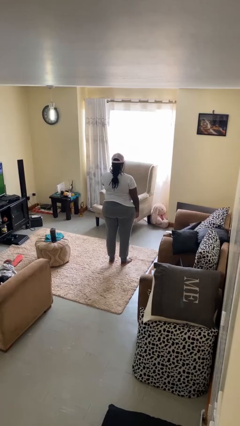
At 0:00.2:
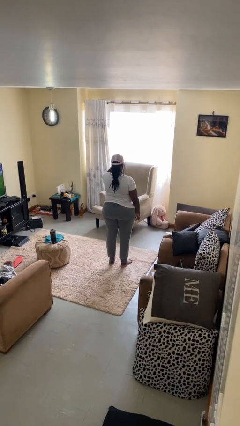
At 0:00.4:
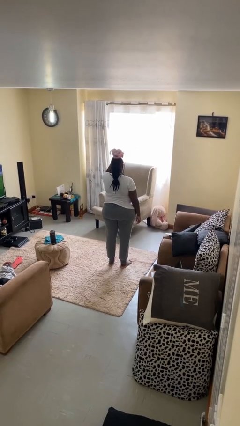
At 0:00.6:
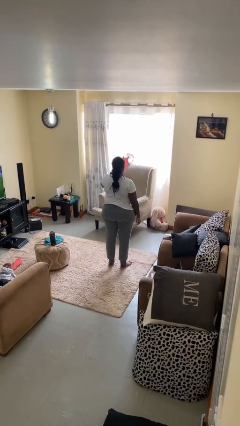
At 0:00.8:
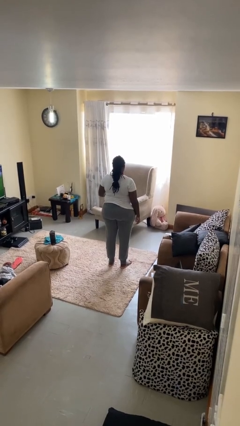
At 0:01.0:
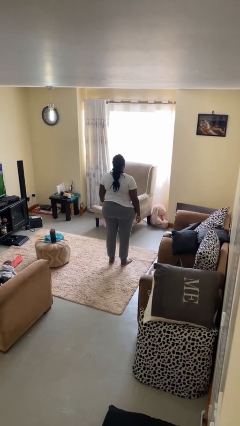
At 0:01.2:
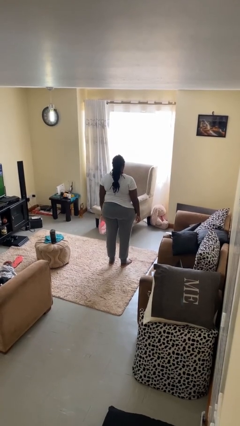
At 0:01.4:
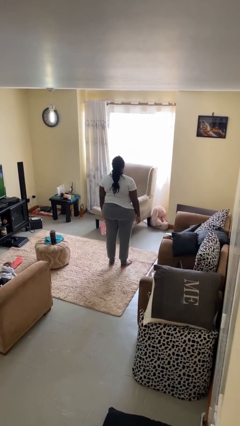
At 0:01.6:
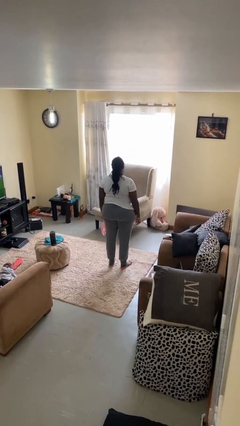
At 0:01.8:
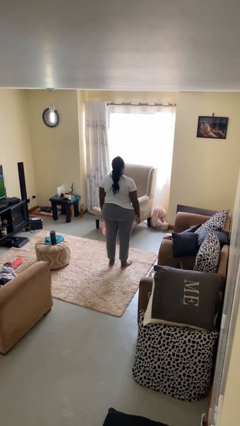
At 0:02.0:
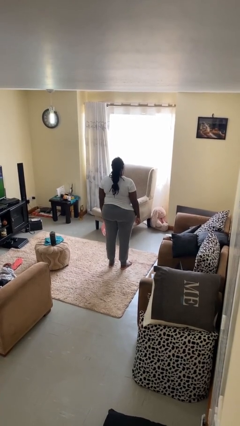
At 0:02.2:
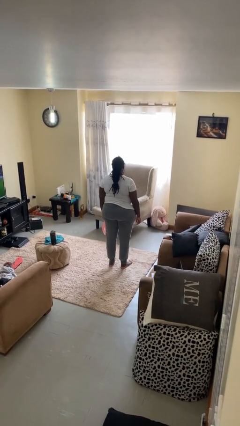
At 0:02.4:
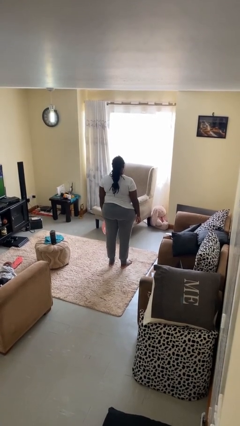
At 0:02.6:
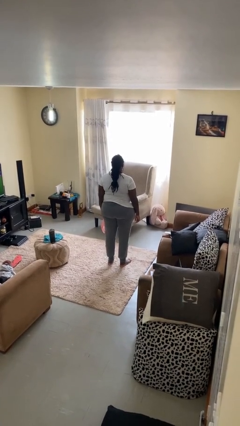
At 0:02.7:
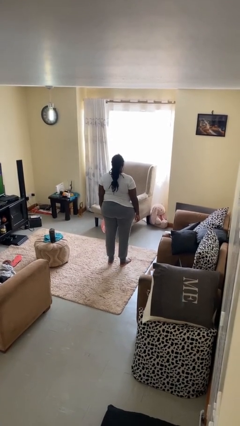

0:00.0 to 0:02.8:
person takes off hat

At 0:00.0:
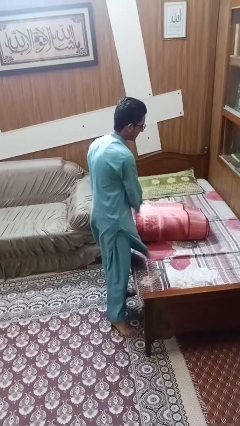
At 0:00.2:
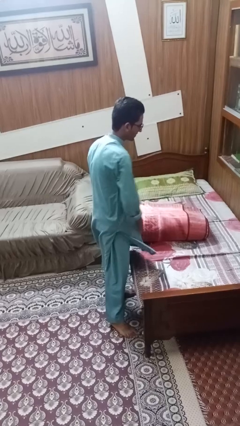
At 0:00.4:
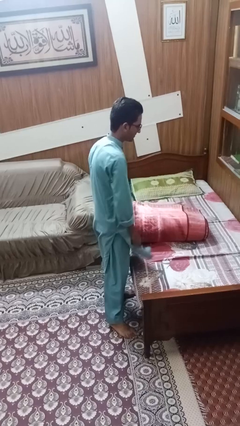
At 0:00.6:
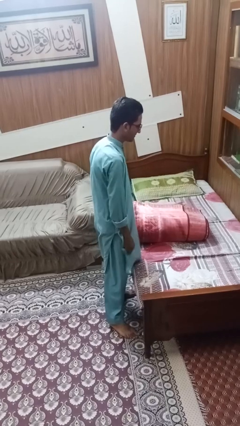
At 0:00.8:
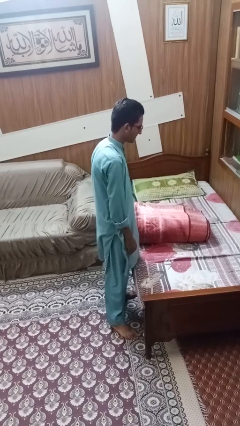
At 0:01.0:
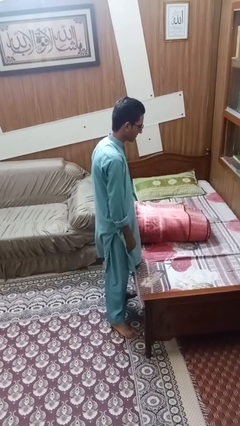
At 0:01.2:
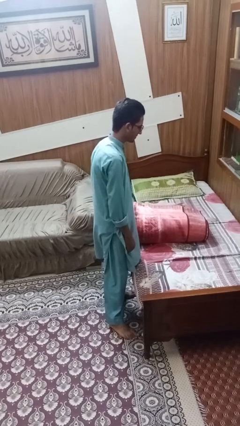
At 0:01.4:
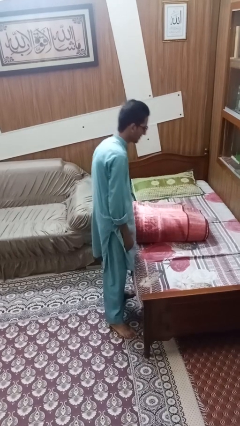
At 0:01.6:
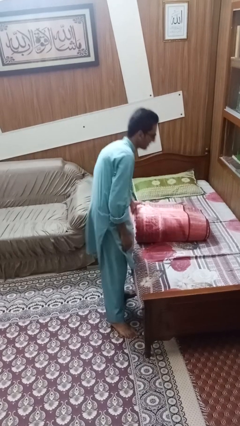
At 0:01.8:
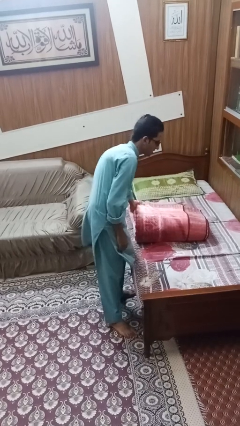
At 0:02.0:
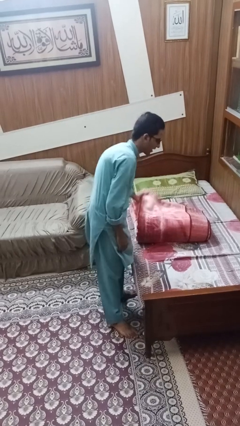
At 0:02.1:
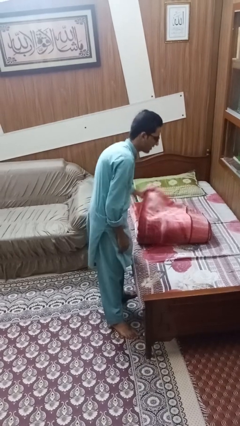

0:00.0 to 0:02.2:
person folds blanket

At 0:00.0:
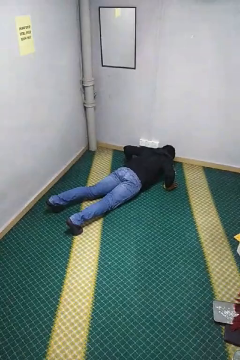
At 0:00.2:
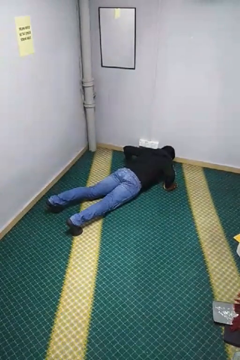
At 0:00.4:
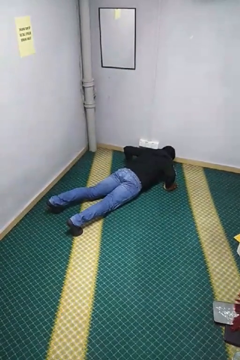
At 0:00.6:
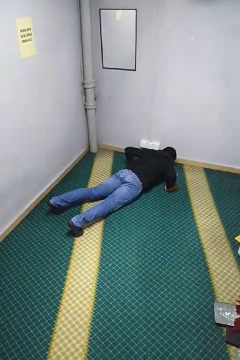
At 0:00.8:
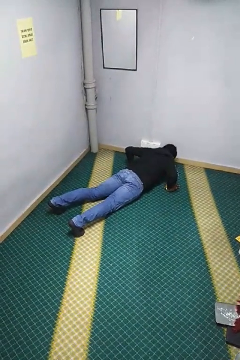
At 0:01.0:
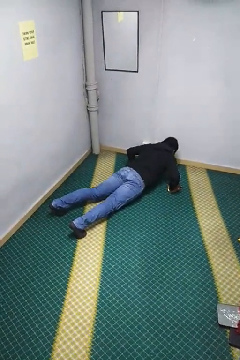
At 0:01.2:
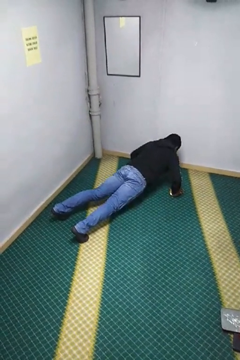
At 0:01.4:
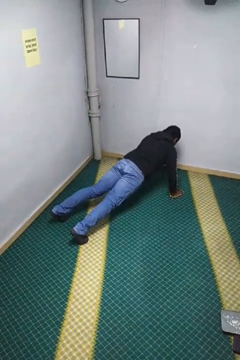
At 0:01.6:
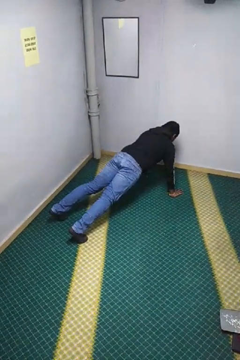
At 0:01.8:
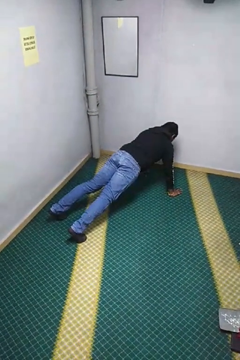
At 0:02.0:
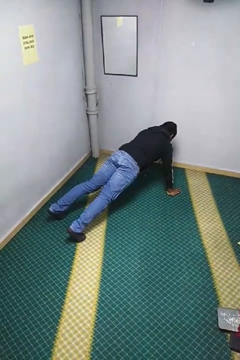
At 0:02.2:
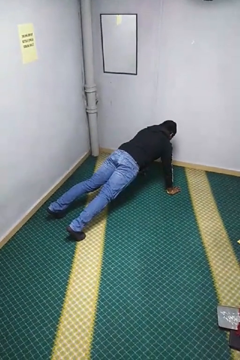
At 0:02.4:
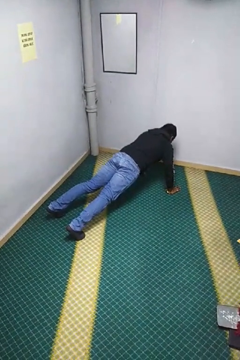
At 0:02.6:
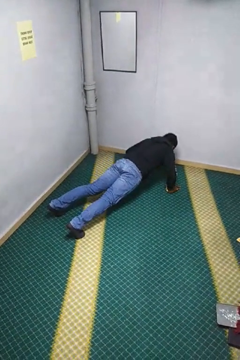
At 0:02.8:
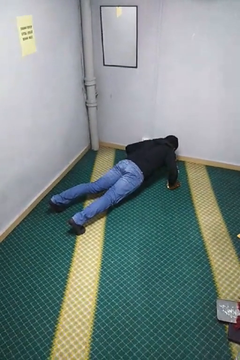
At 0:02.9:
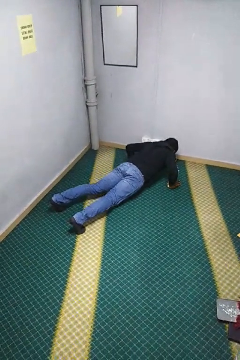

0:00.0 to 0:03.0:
person exercises with pushup

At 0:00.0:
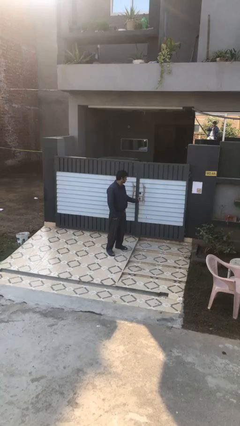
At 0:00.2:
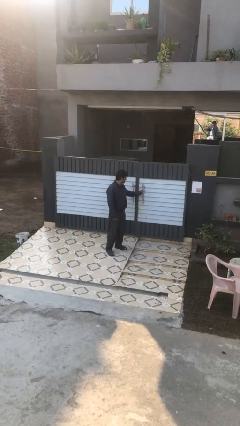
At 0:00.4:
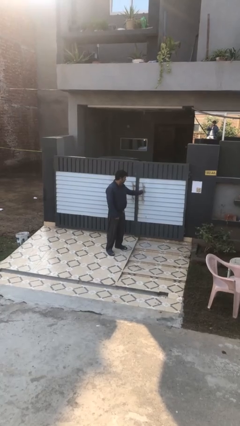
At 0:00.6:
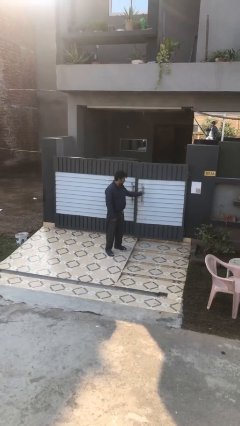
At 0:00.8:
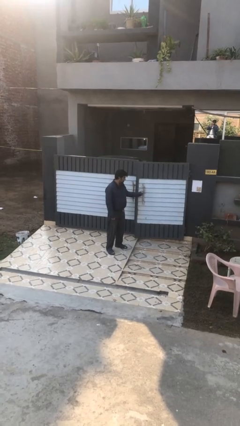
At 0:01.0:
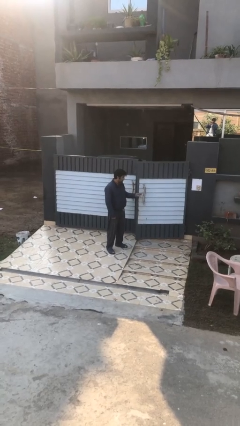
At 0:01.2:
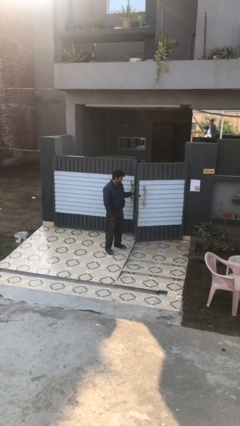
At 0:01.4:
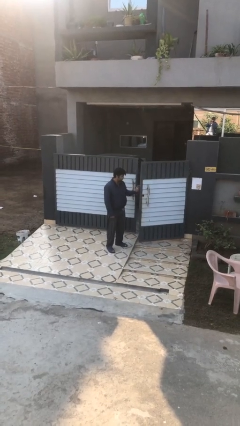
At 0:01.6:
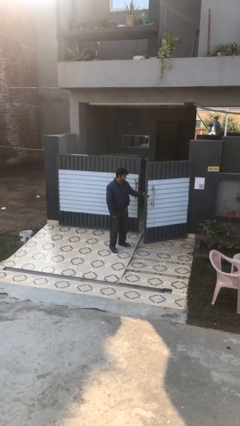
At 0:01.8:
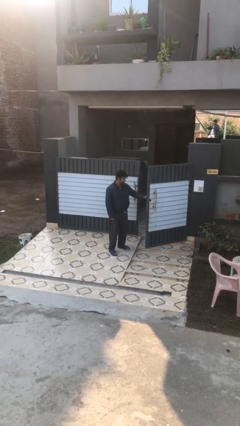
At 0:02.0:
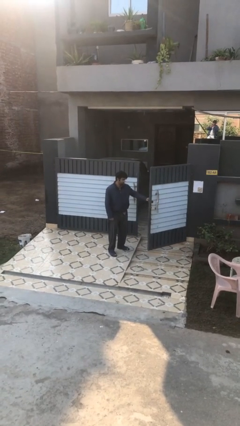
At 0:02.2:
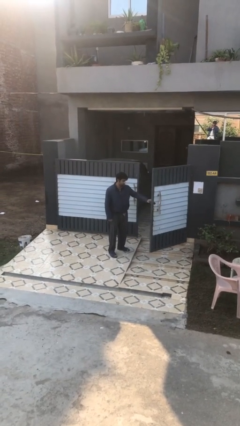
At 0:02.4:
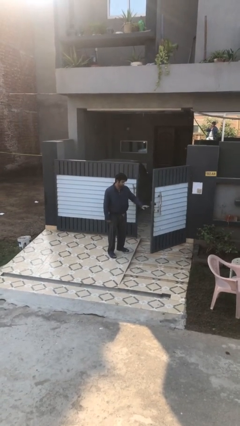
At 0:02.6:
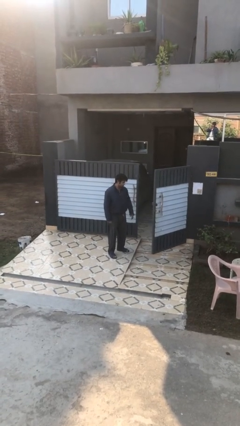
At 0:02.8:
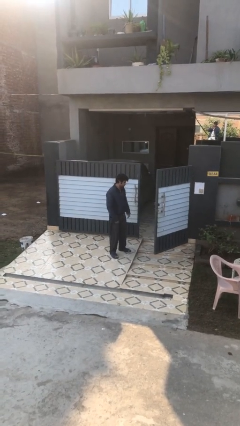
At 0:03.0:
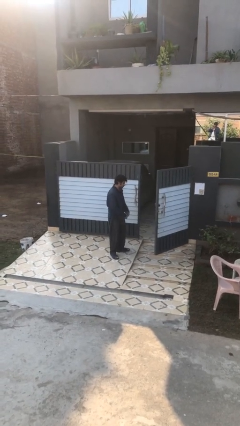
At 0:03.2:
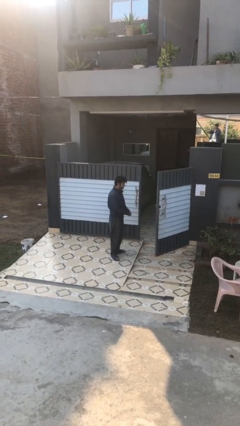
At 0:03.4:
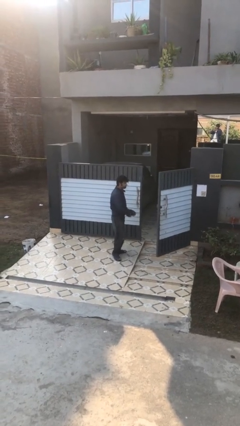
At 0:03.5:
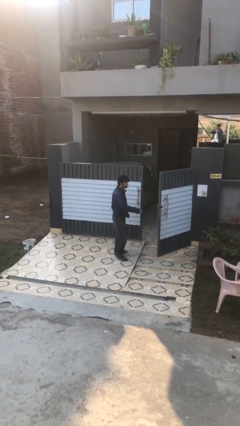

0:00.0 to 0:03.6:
person opens facility door

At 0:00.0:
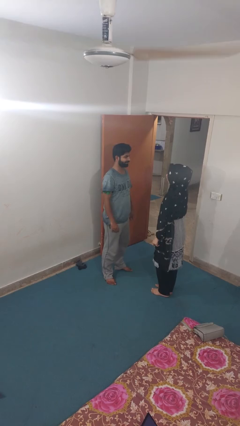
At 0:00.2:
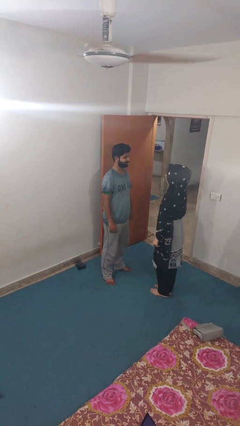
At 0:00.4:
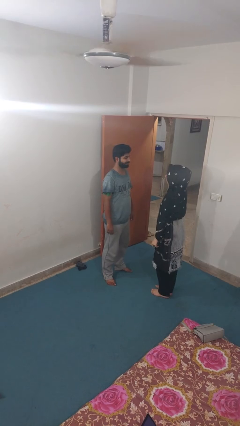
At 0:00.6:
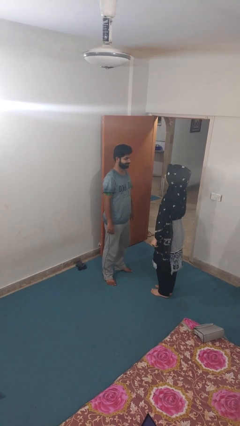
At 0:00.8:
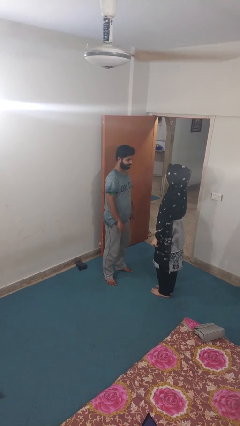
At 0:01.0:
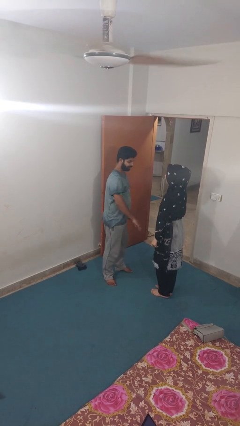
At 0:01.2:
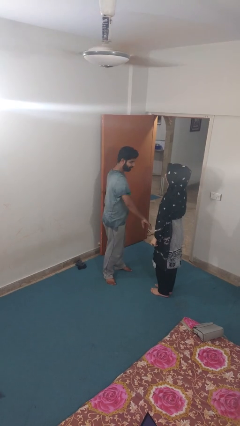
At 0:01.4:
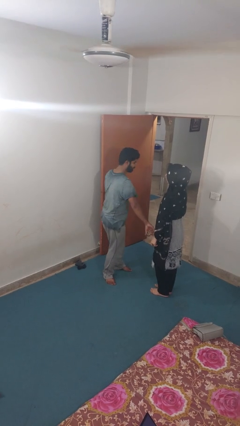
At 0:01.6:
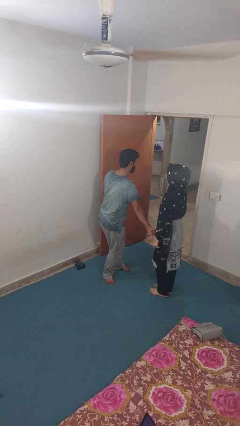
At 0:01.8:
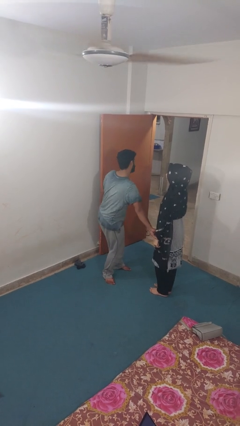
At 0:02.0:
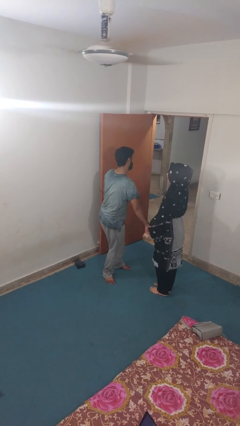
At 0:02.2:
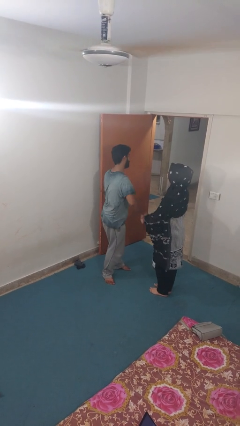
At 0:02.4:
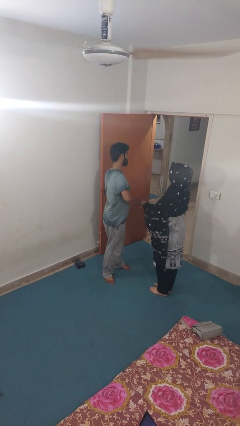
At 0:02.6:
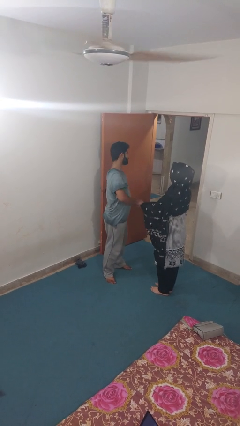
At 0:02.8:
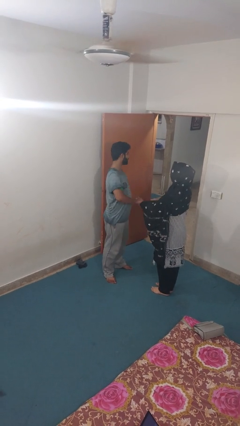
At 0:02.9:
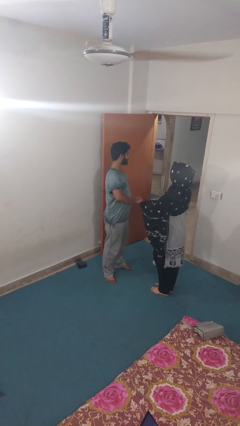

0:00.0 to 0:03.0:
person grabs person by forearm

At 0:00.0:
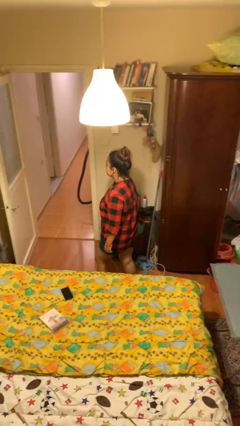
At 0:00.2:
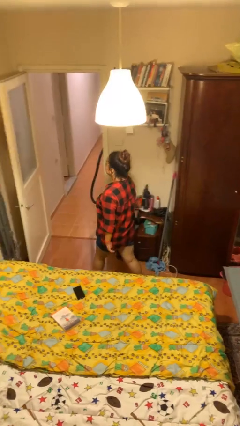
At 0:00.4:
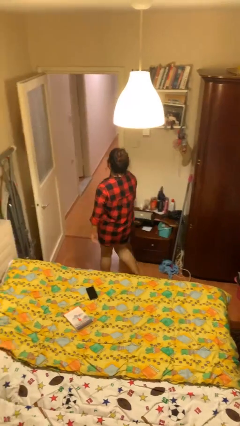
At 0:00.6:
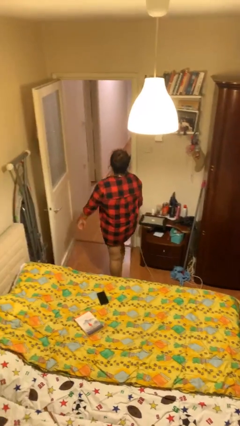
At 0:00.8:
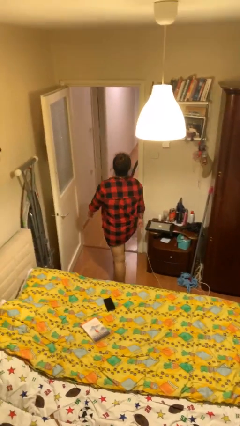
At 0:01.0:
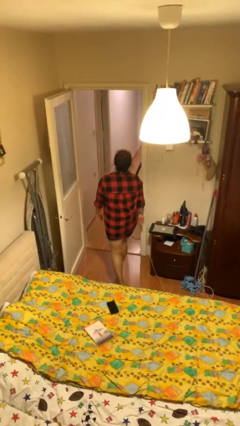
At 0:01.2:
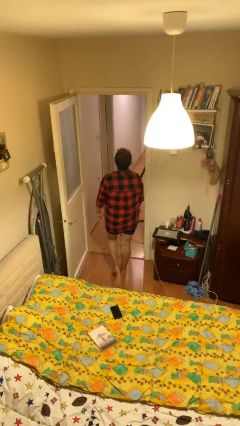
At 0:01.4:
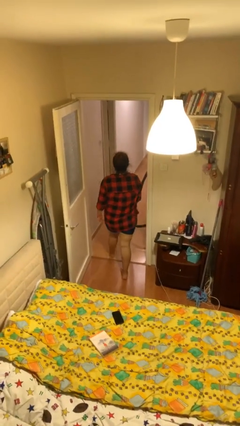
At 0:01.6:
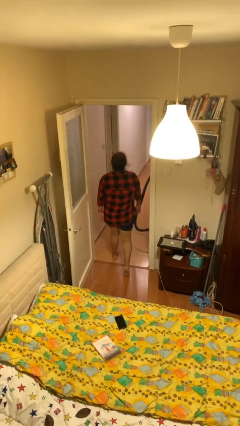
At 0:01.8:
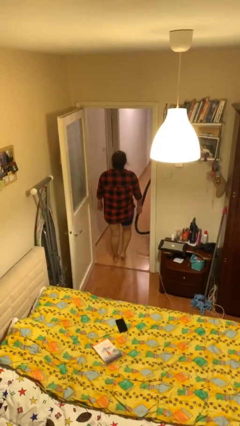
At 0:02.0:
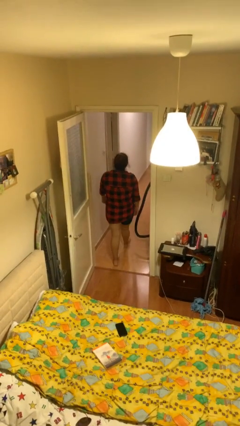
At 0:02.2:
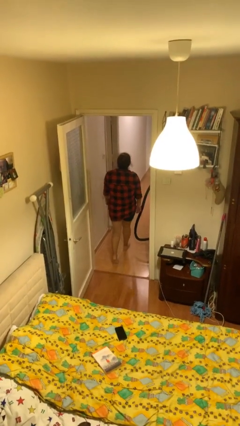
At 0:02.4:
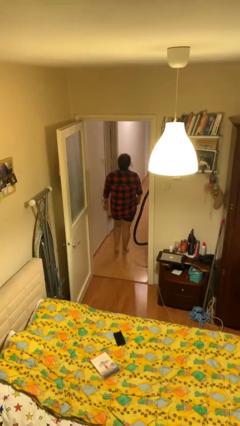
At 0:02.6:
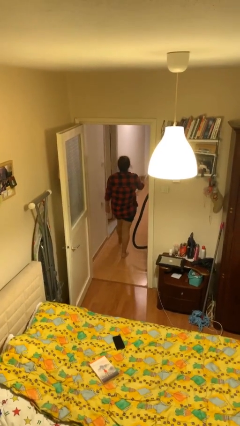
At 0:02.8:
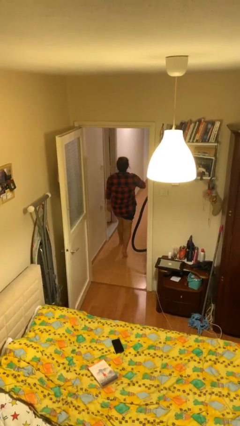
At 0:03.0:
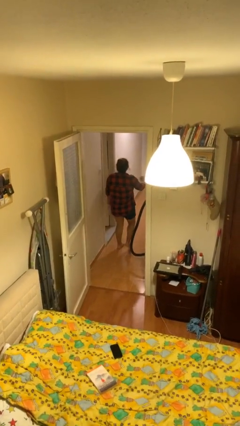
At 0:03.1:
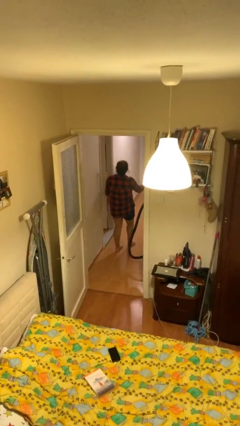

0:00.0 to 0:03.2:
person exits scene through structure

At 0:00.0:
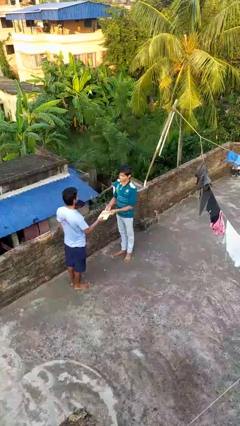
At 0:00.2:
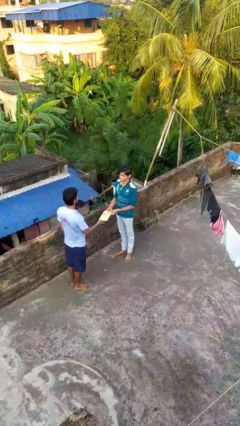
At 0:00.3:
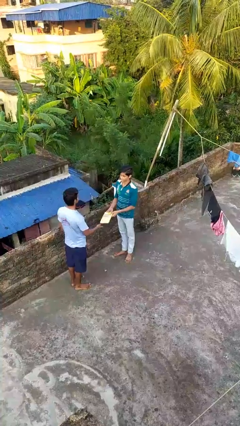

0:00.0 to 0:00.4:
person transfers object to person
